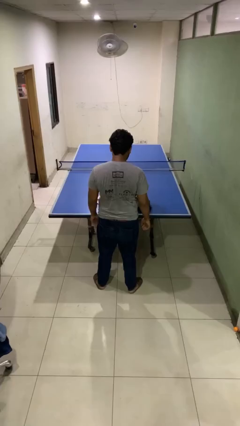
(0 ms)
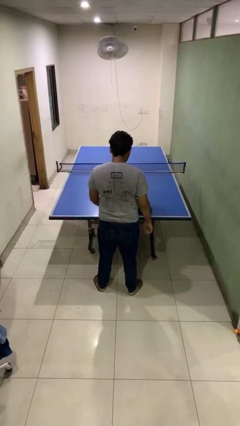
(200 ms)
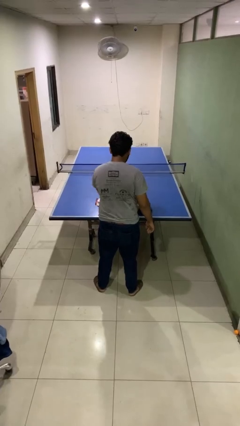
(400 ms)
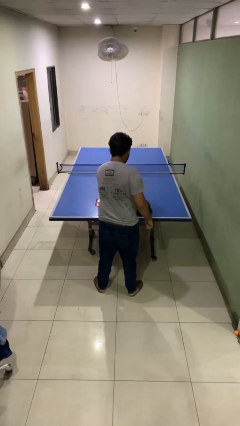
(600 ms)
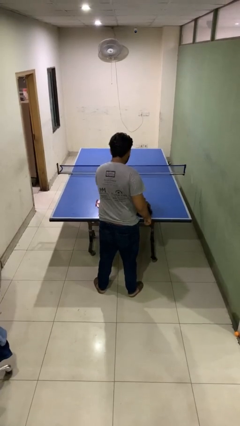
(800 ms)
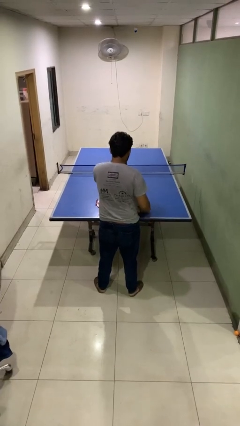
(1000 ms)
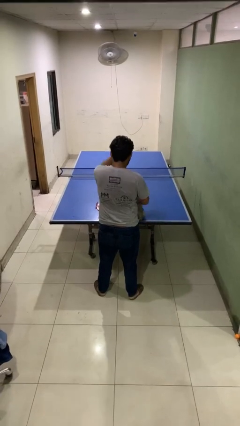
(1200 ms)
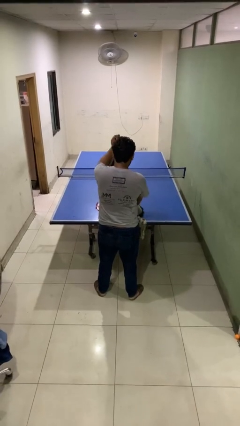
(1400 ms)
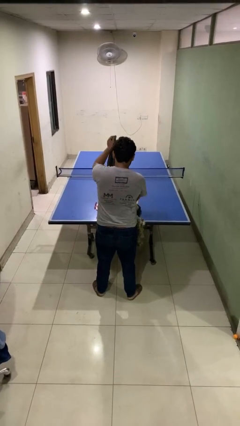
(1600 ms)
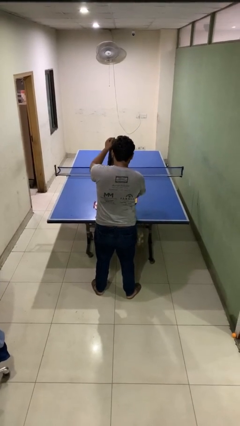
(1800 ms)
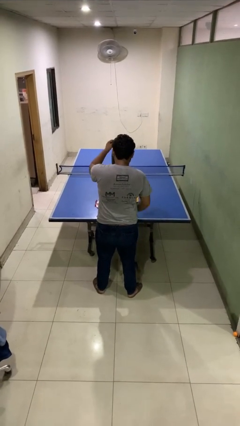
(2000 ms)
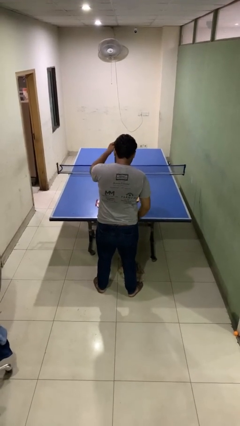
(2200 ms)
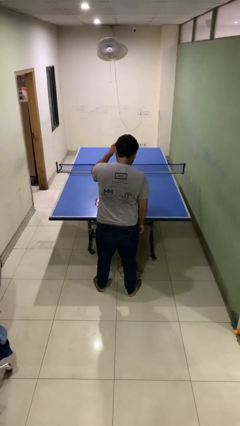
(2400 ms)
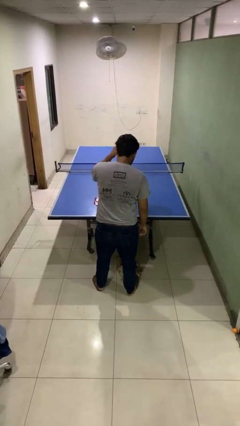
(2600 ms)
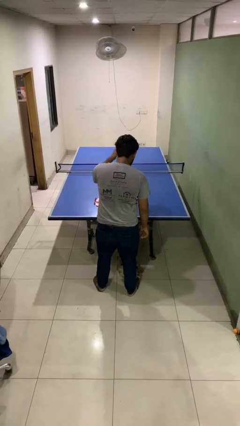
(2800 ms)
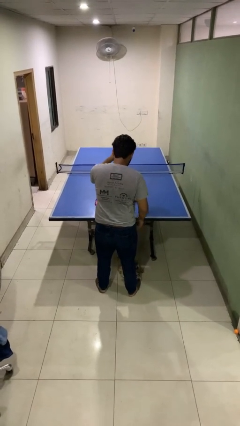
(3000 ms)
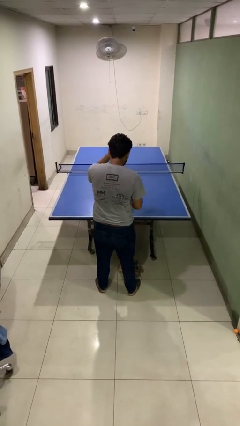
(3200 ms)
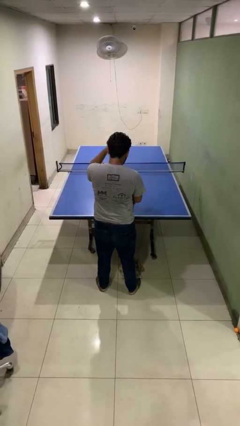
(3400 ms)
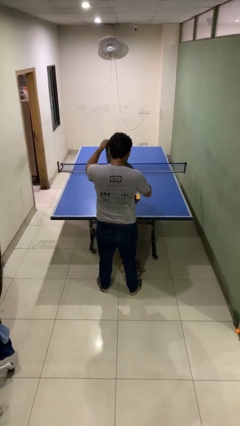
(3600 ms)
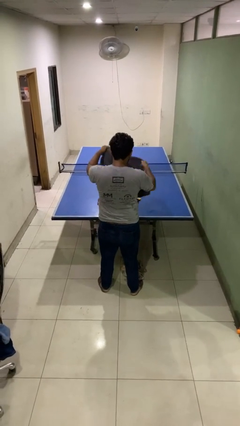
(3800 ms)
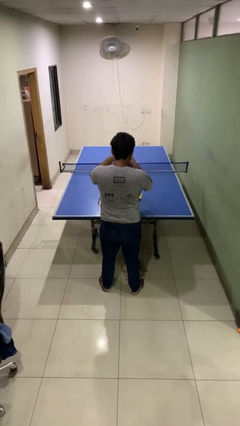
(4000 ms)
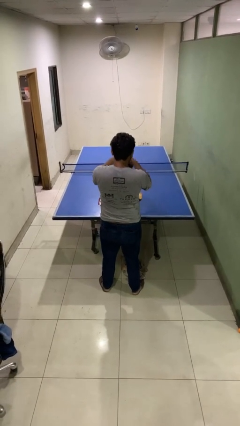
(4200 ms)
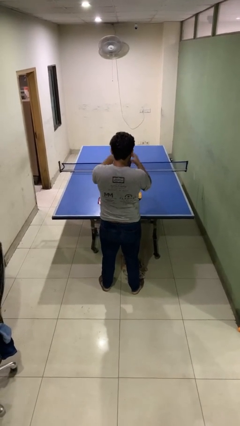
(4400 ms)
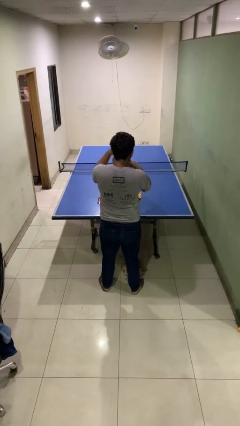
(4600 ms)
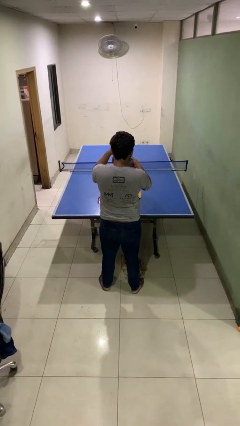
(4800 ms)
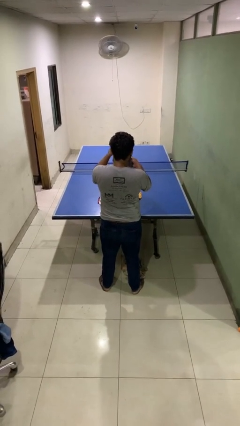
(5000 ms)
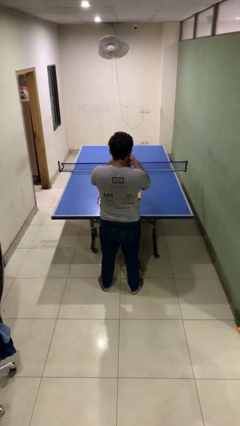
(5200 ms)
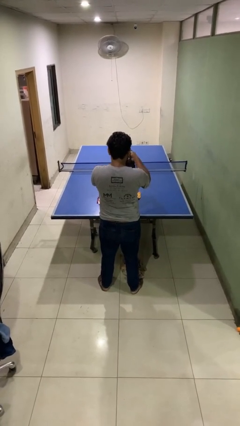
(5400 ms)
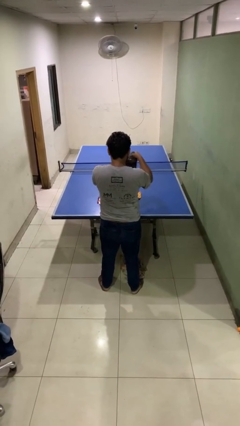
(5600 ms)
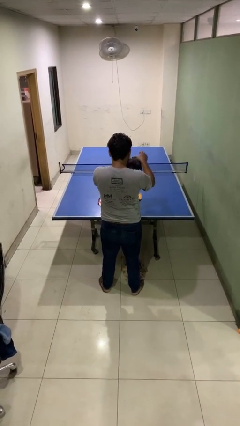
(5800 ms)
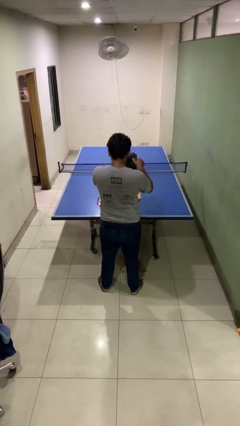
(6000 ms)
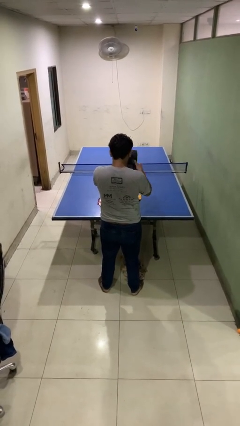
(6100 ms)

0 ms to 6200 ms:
person folds shirt

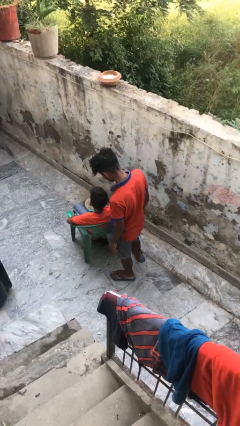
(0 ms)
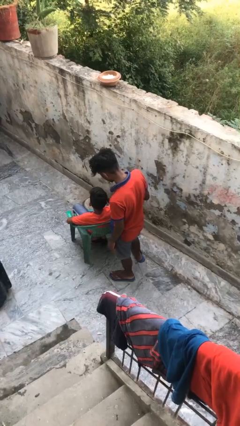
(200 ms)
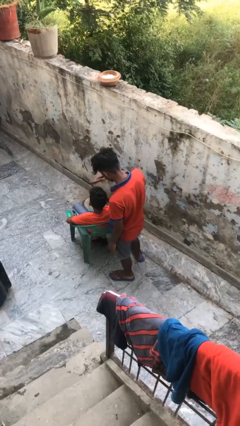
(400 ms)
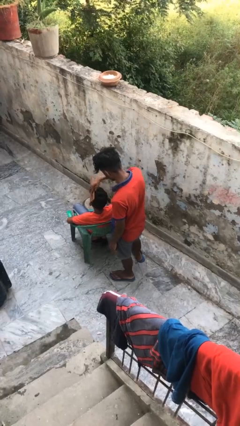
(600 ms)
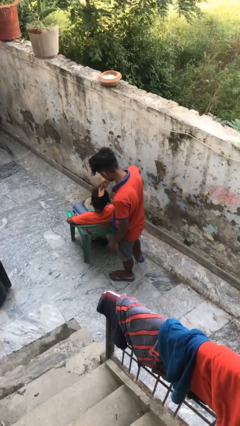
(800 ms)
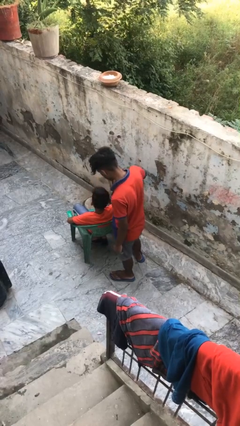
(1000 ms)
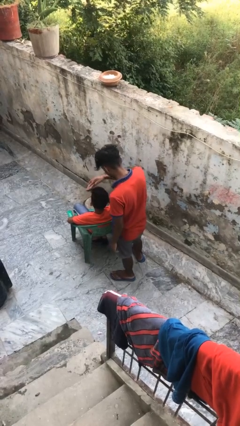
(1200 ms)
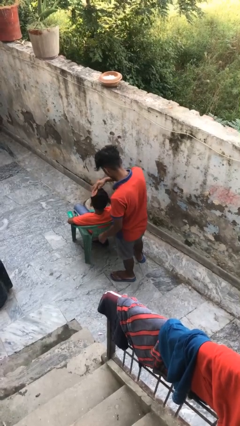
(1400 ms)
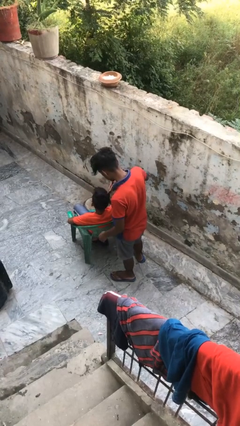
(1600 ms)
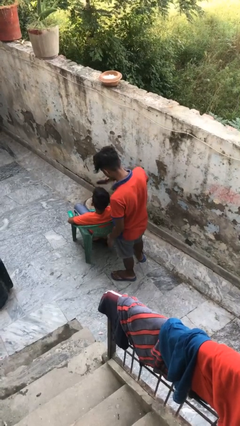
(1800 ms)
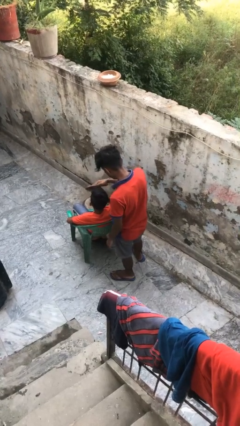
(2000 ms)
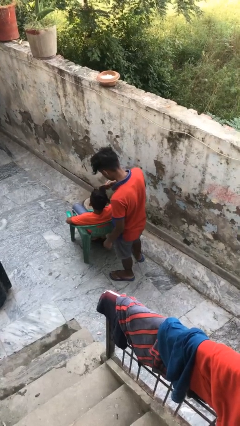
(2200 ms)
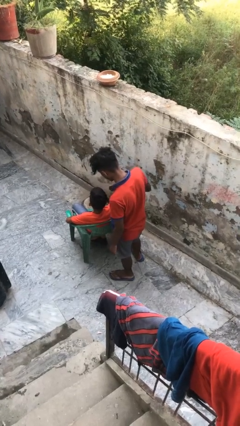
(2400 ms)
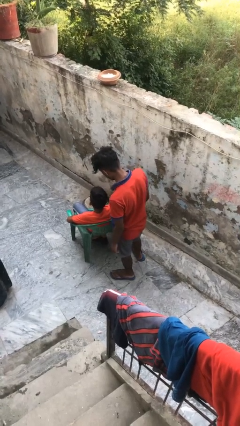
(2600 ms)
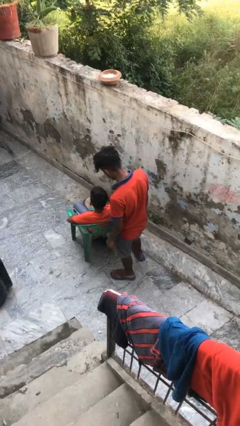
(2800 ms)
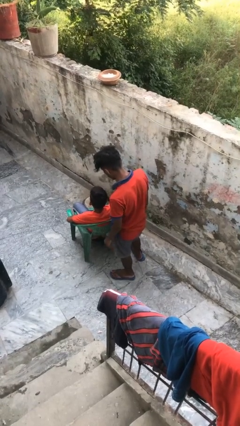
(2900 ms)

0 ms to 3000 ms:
person brushes hair of person

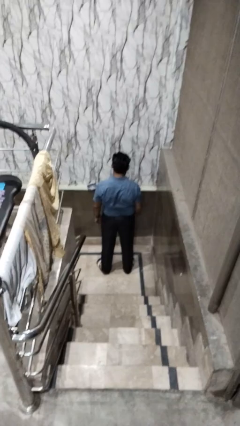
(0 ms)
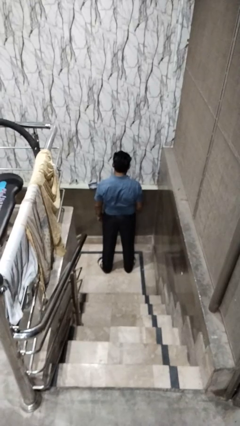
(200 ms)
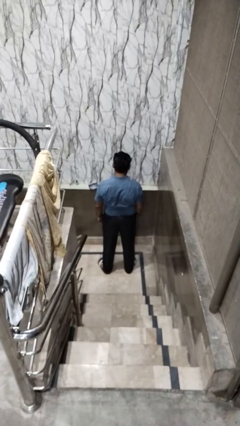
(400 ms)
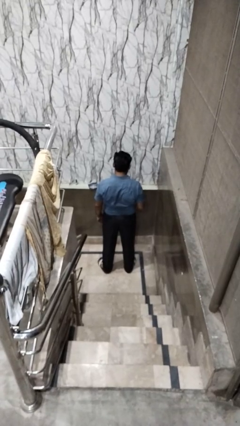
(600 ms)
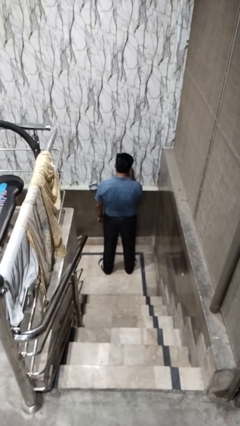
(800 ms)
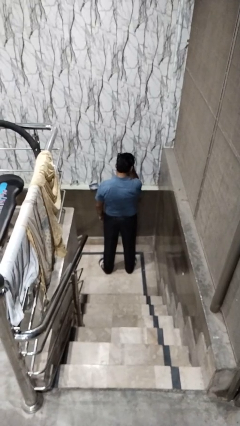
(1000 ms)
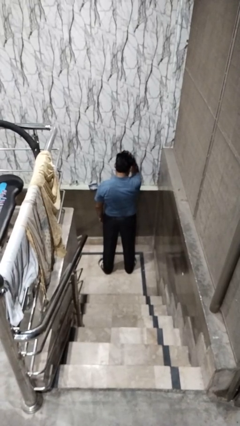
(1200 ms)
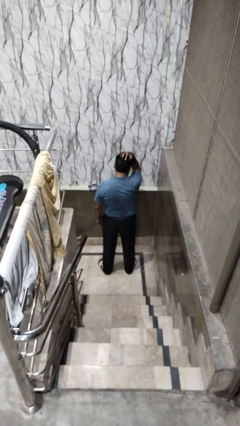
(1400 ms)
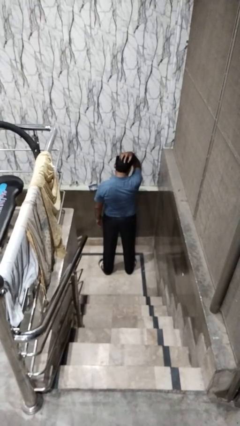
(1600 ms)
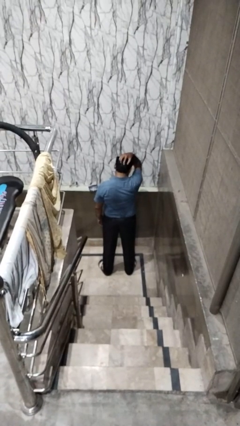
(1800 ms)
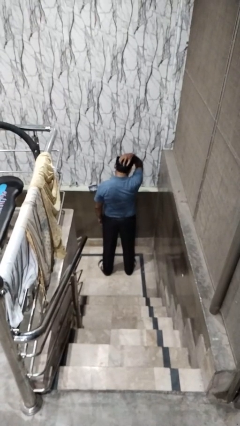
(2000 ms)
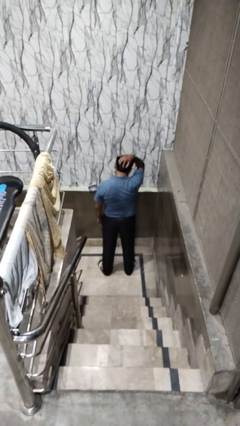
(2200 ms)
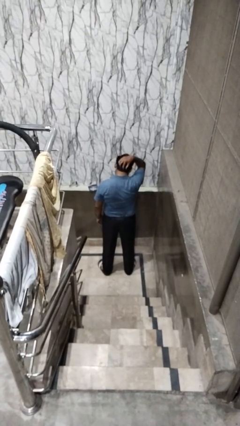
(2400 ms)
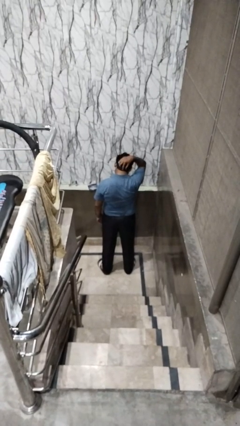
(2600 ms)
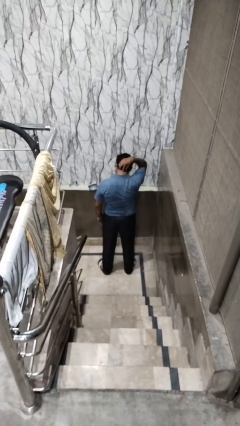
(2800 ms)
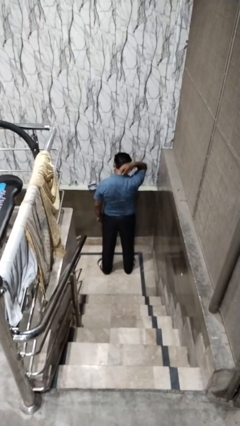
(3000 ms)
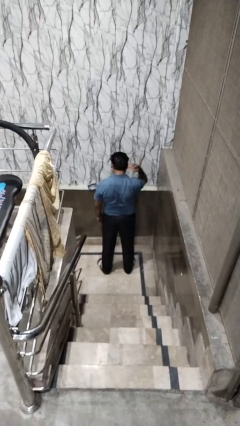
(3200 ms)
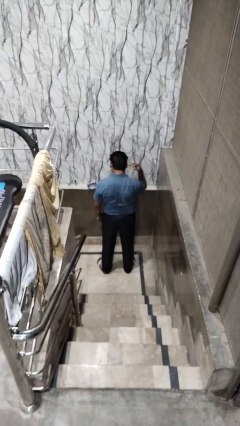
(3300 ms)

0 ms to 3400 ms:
person strokes hair

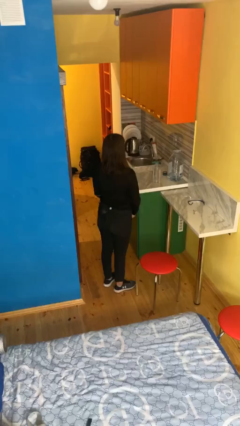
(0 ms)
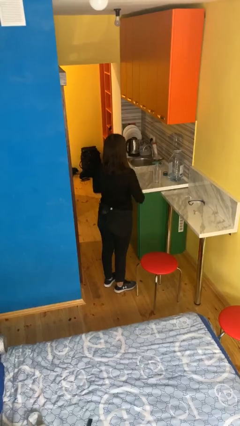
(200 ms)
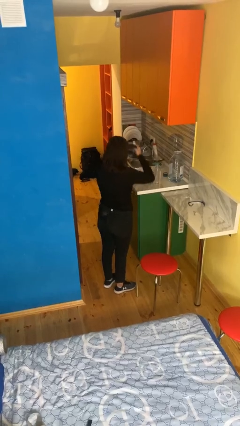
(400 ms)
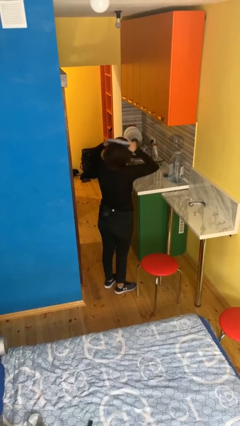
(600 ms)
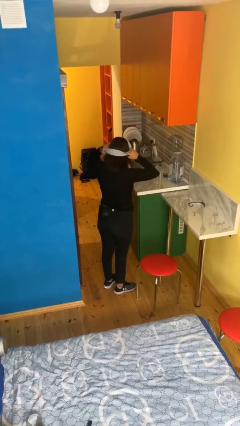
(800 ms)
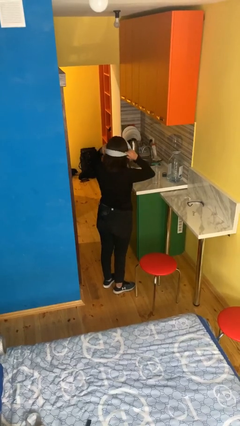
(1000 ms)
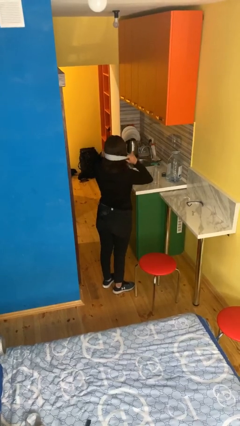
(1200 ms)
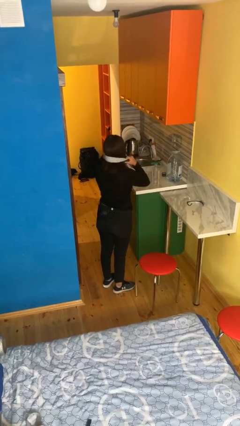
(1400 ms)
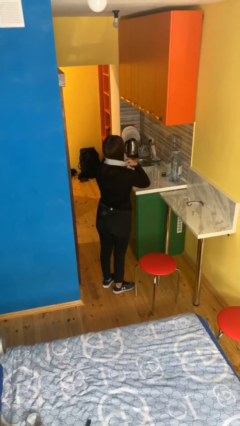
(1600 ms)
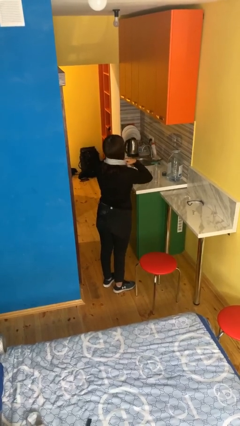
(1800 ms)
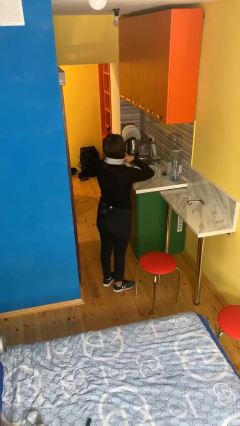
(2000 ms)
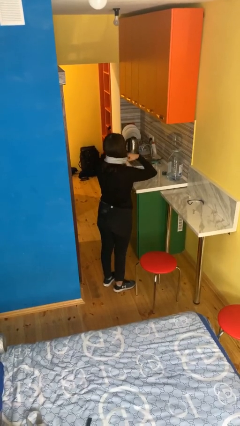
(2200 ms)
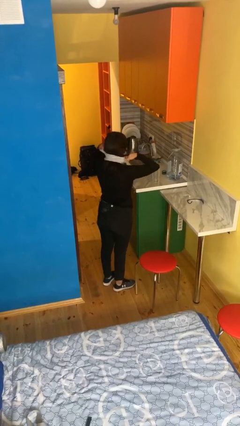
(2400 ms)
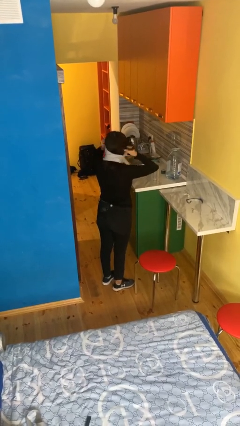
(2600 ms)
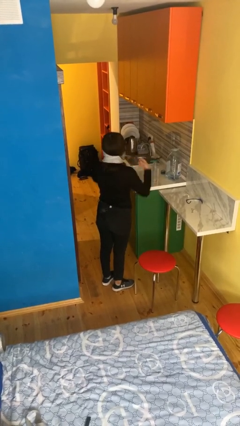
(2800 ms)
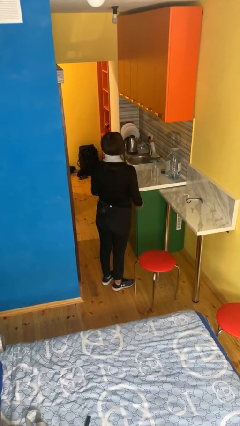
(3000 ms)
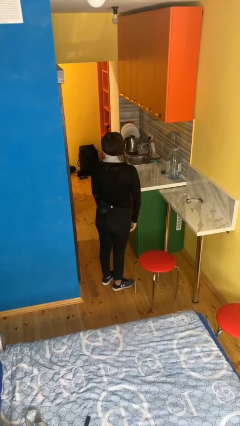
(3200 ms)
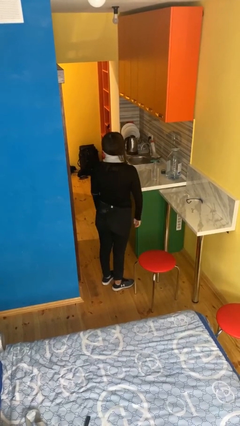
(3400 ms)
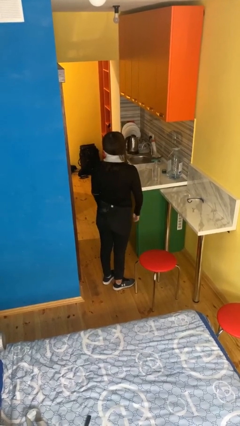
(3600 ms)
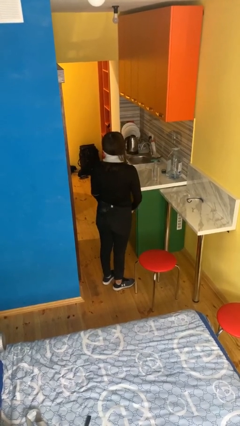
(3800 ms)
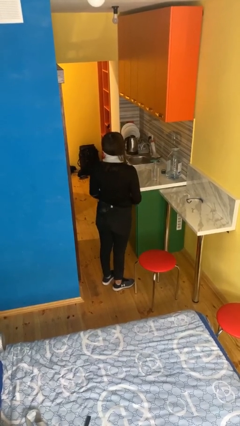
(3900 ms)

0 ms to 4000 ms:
person puts on scarf

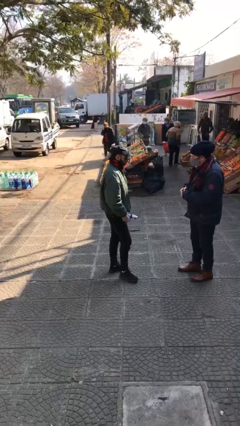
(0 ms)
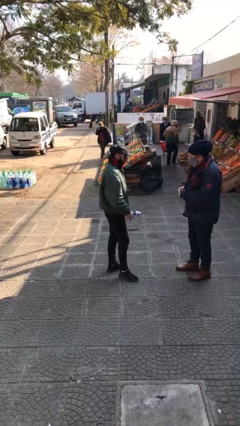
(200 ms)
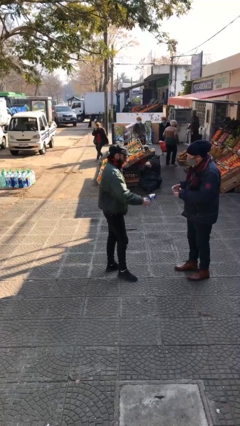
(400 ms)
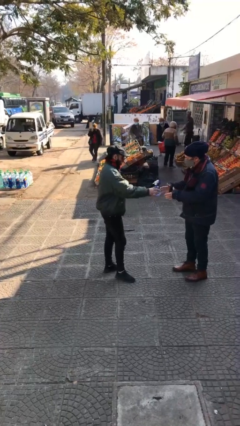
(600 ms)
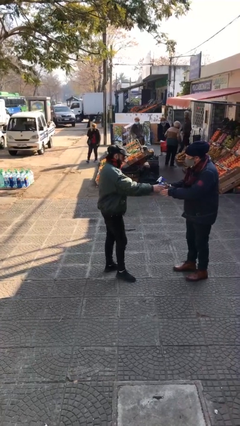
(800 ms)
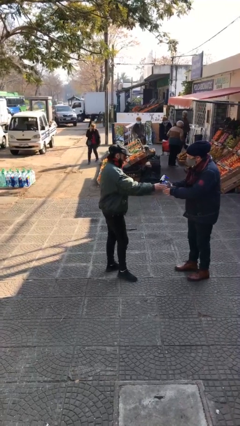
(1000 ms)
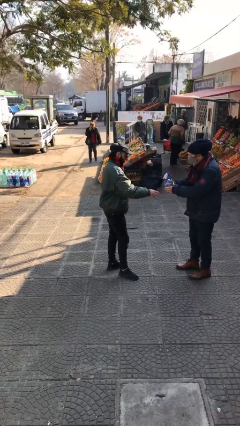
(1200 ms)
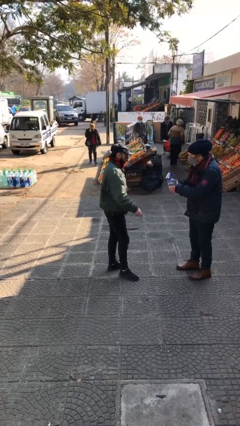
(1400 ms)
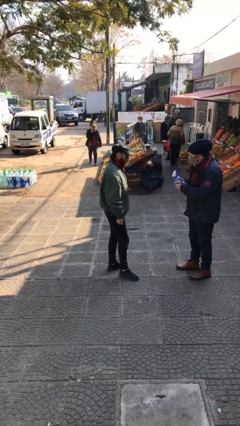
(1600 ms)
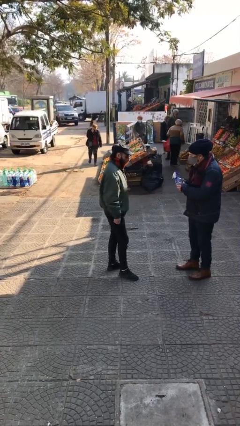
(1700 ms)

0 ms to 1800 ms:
person transfers object to person
